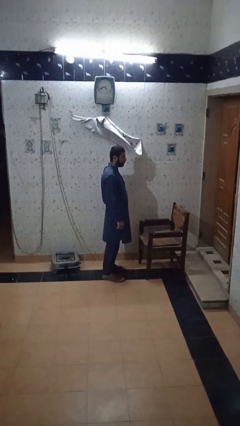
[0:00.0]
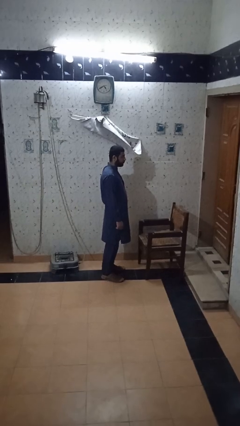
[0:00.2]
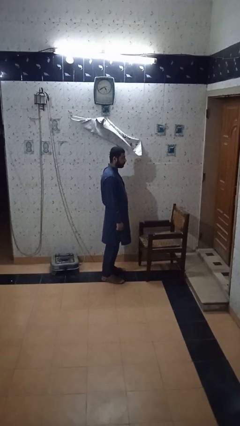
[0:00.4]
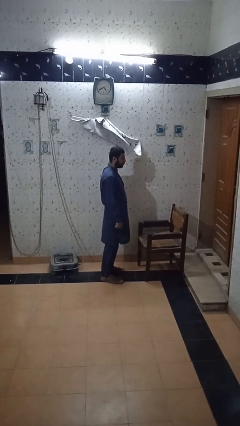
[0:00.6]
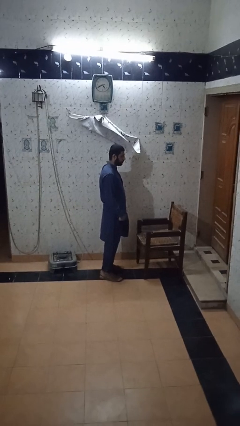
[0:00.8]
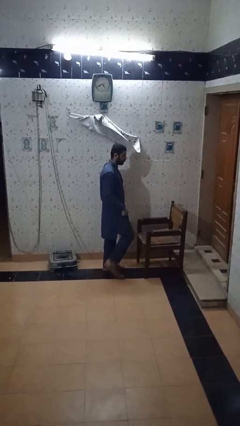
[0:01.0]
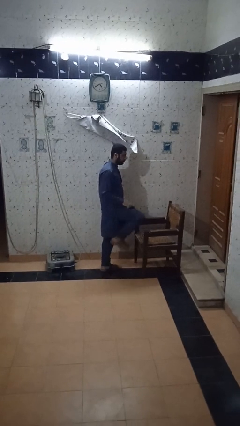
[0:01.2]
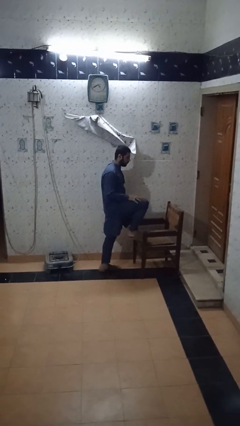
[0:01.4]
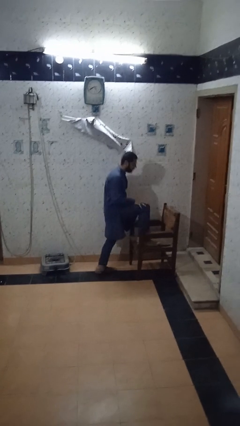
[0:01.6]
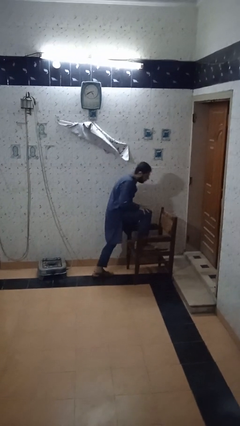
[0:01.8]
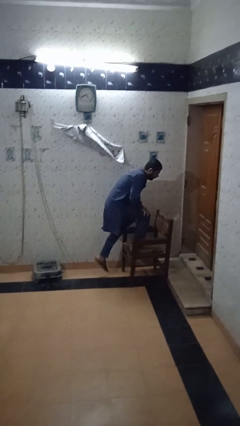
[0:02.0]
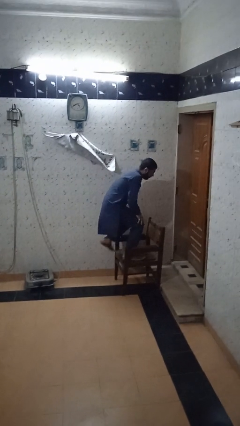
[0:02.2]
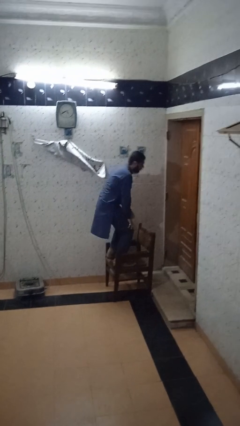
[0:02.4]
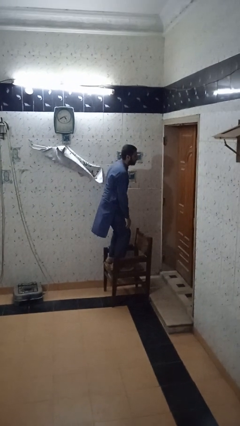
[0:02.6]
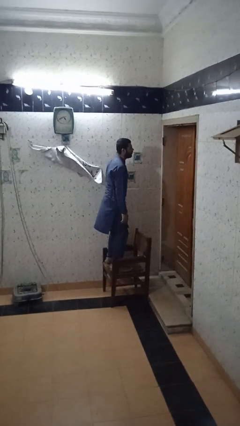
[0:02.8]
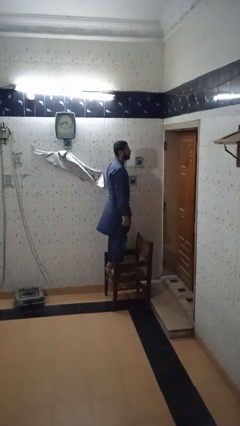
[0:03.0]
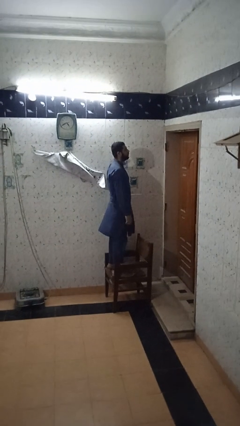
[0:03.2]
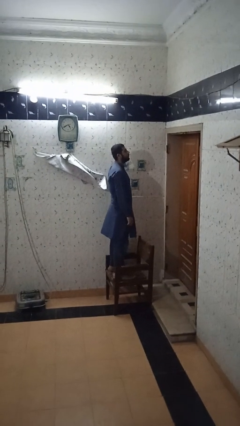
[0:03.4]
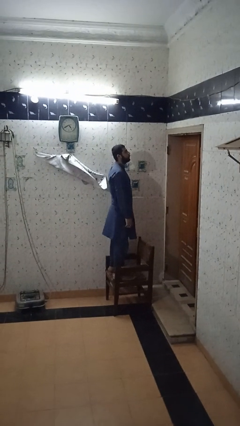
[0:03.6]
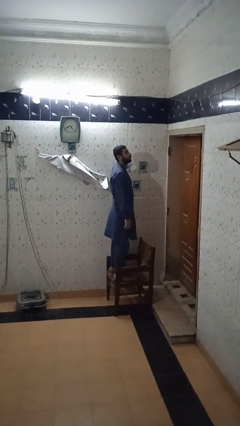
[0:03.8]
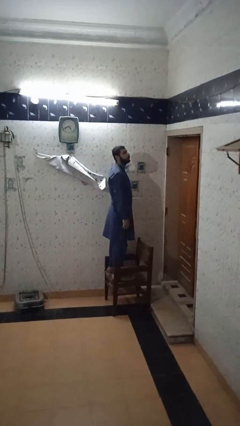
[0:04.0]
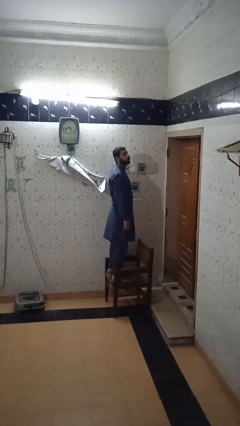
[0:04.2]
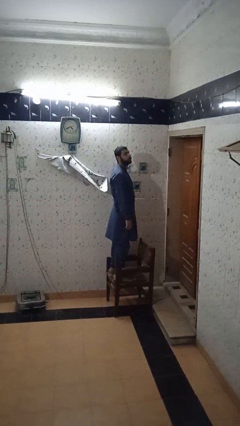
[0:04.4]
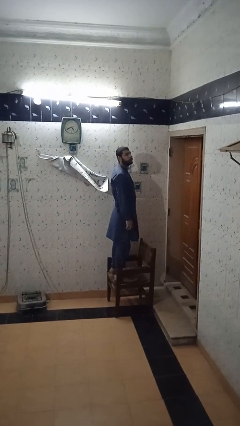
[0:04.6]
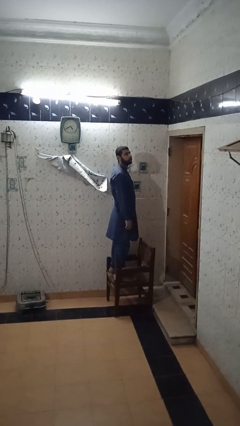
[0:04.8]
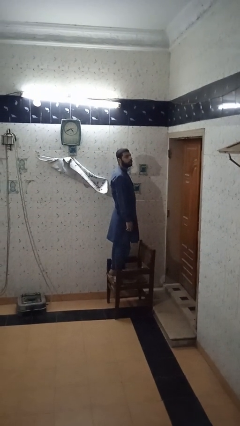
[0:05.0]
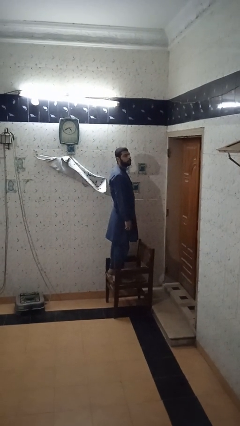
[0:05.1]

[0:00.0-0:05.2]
person climbs on chair

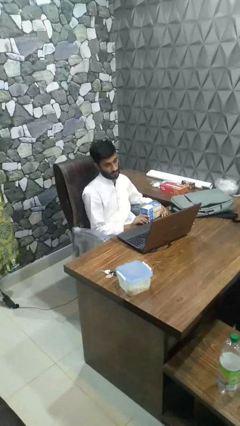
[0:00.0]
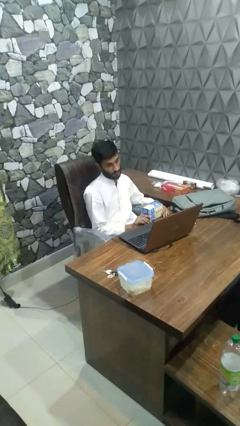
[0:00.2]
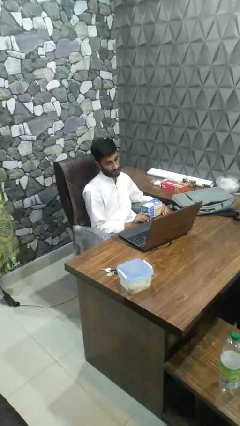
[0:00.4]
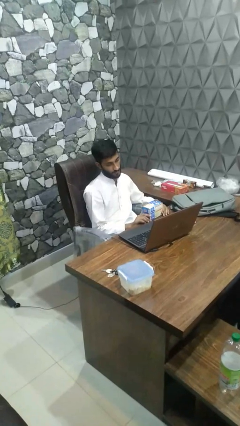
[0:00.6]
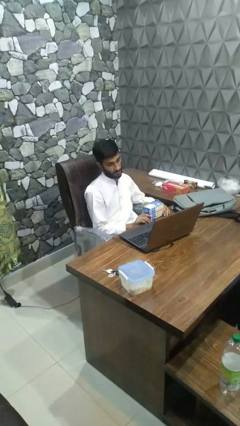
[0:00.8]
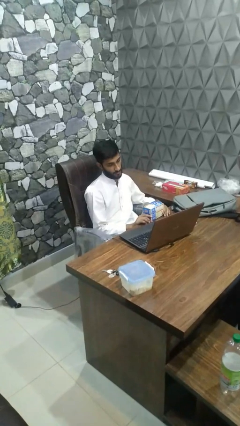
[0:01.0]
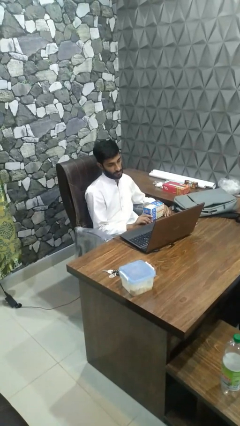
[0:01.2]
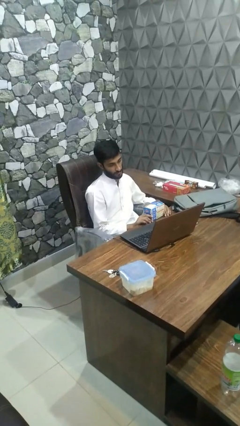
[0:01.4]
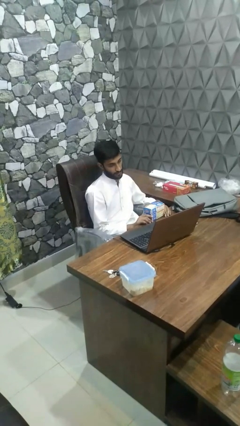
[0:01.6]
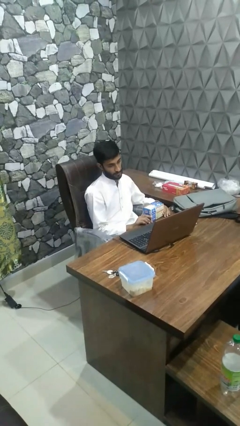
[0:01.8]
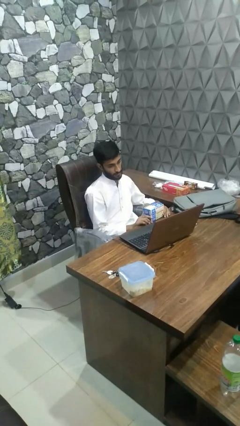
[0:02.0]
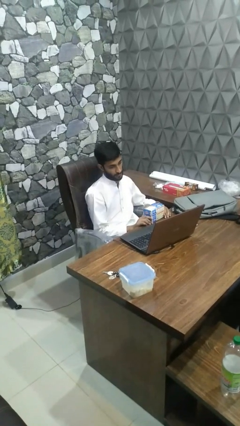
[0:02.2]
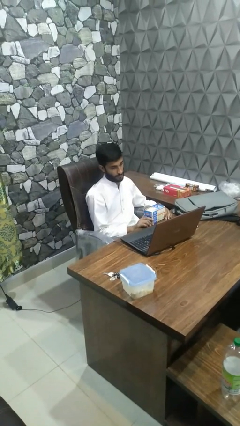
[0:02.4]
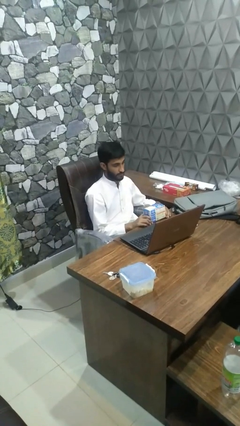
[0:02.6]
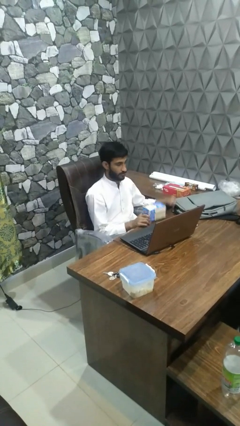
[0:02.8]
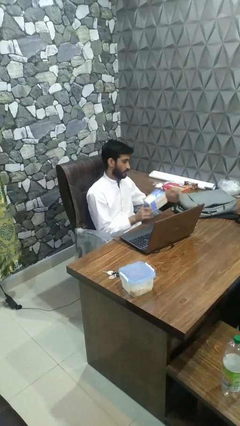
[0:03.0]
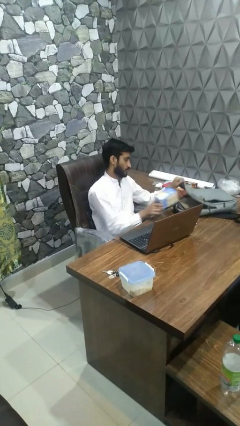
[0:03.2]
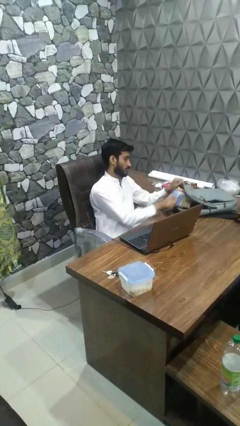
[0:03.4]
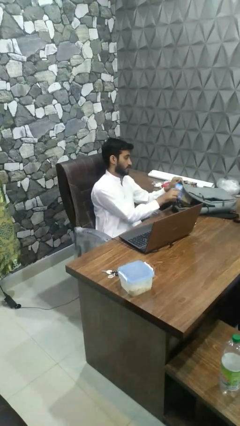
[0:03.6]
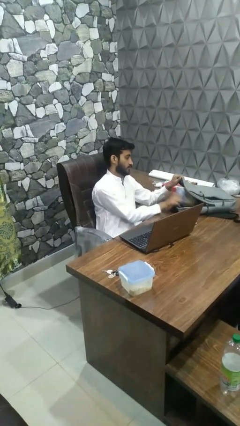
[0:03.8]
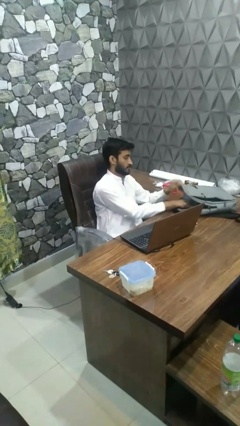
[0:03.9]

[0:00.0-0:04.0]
person puts object into bag

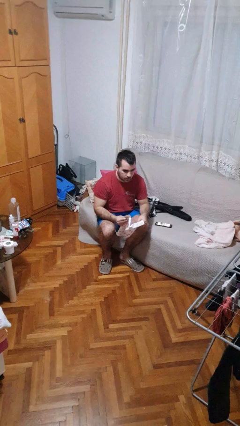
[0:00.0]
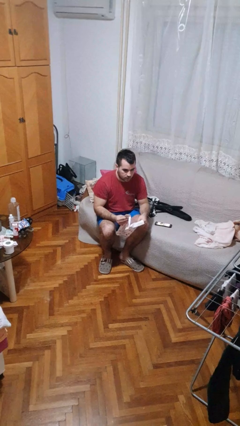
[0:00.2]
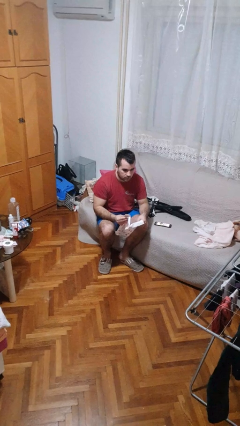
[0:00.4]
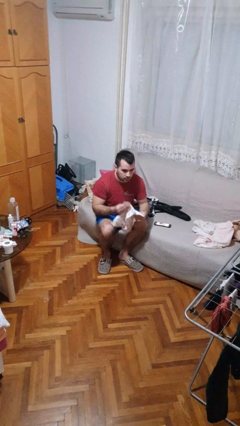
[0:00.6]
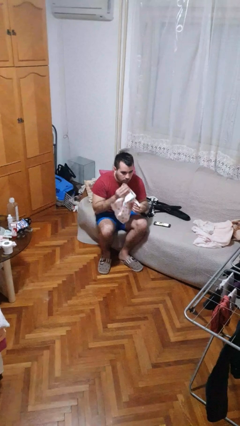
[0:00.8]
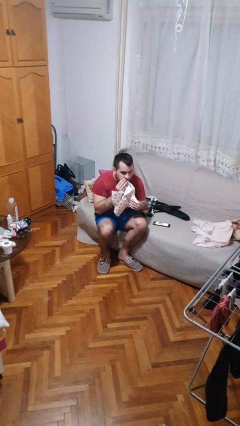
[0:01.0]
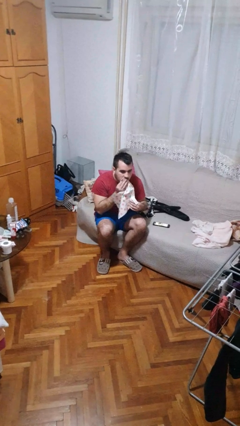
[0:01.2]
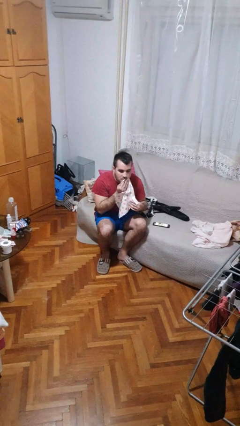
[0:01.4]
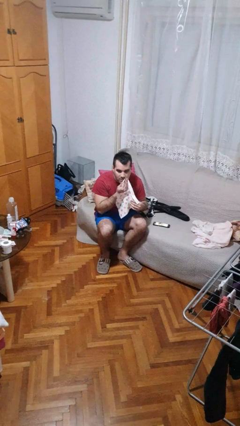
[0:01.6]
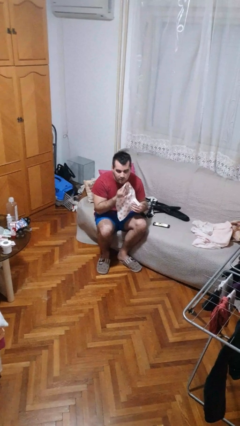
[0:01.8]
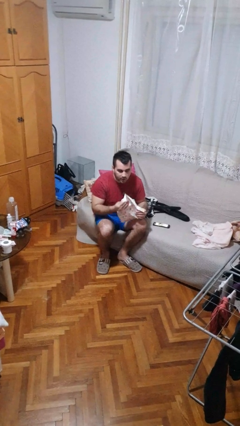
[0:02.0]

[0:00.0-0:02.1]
person wipes mouth with napkin

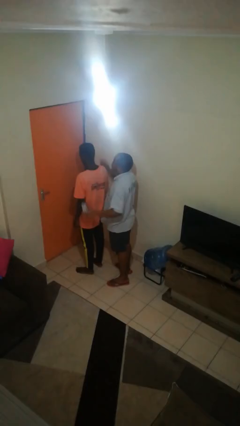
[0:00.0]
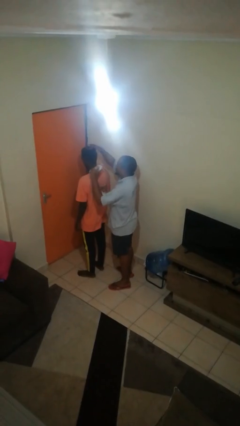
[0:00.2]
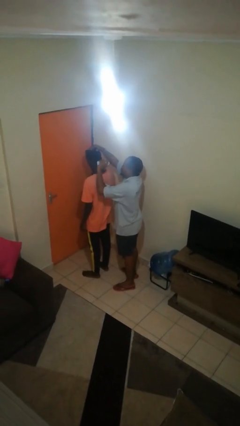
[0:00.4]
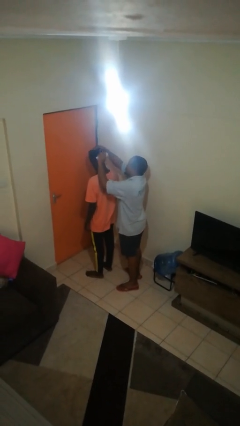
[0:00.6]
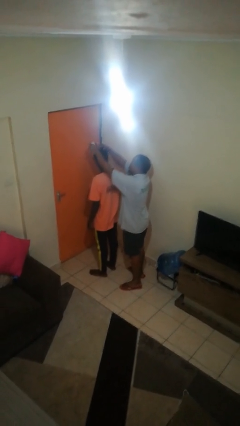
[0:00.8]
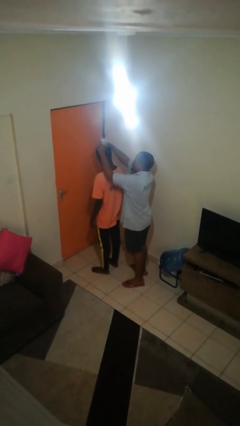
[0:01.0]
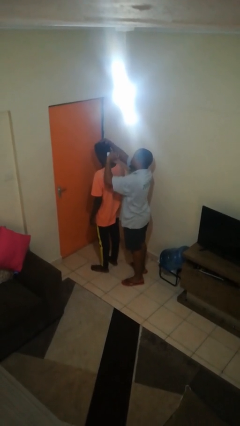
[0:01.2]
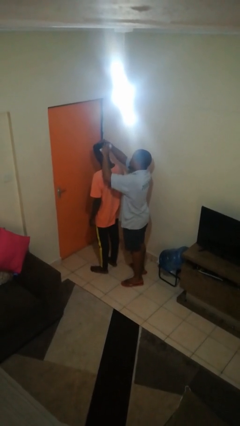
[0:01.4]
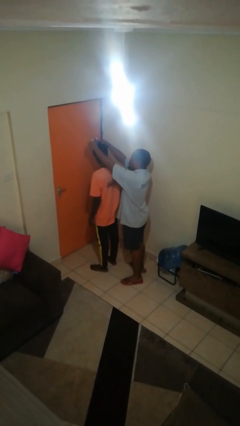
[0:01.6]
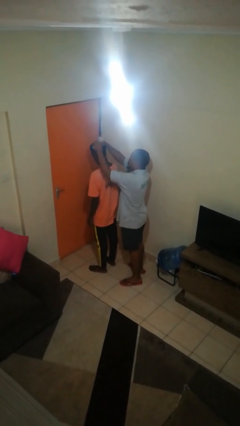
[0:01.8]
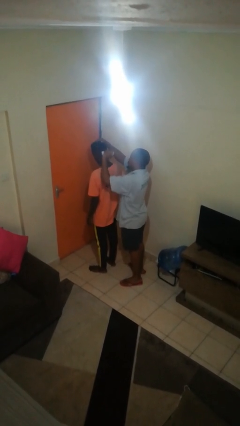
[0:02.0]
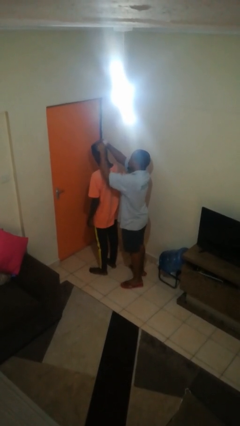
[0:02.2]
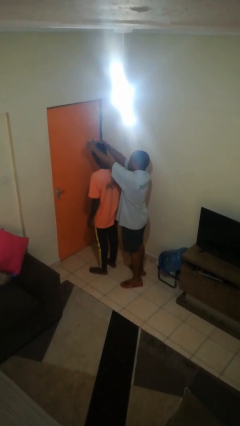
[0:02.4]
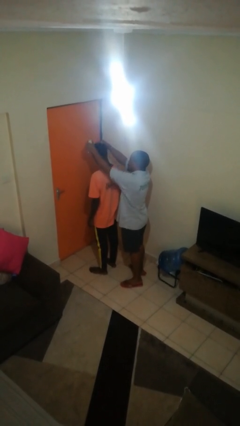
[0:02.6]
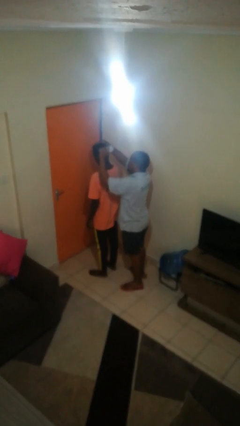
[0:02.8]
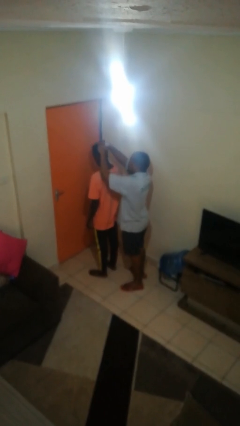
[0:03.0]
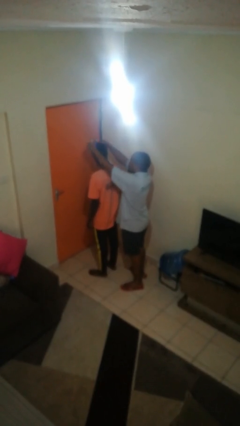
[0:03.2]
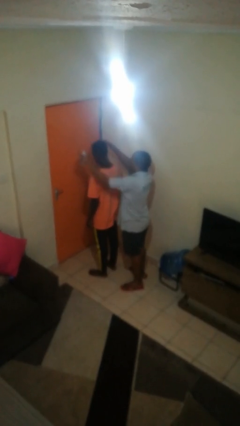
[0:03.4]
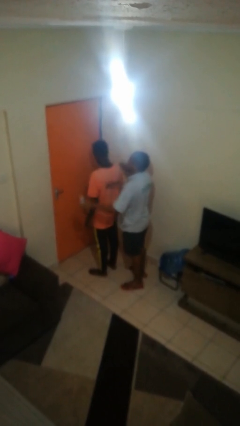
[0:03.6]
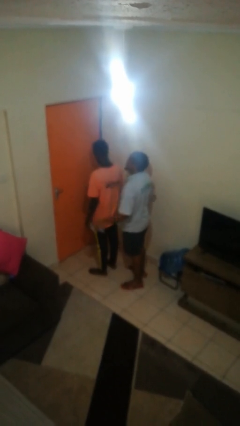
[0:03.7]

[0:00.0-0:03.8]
person brushes hair of person

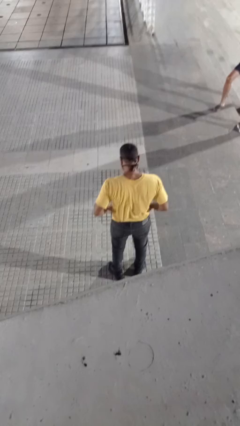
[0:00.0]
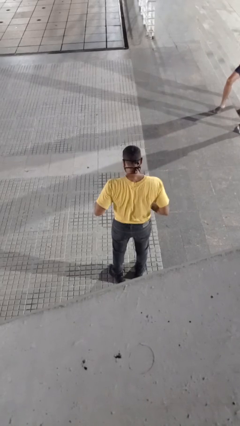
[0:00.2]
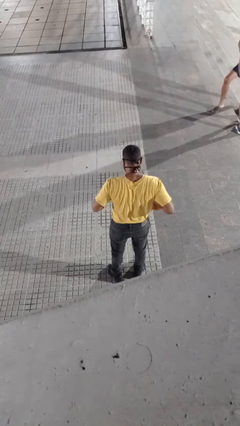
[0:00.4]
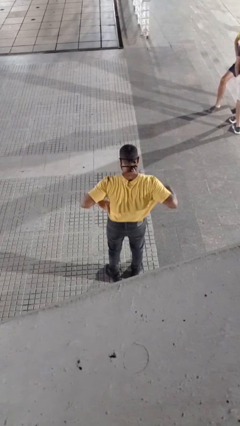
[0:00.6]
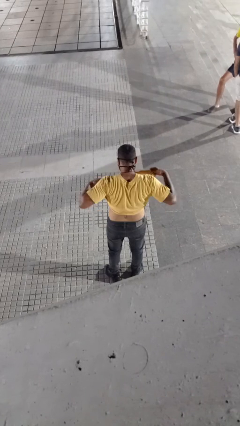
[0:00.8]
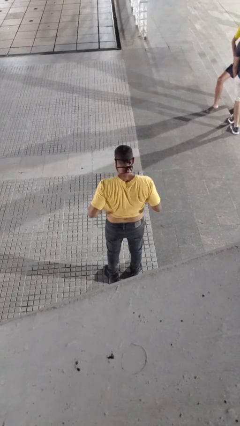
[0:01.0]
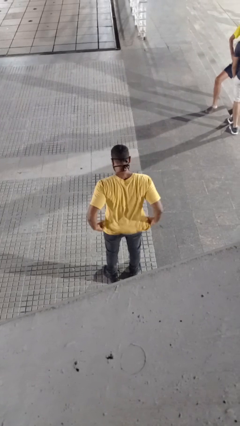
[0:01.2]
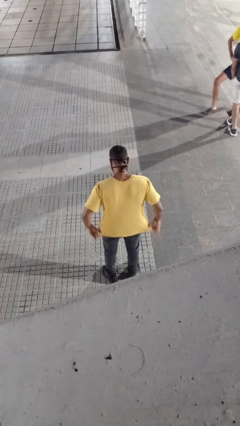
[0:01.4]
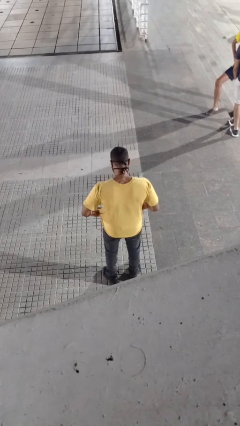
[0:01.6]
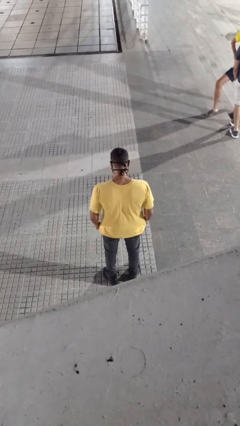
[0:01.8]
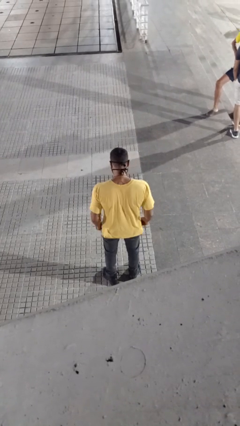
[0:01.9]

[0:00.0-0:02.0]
person untucks shirt

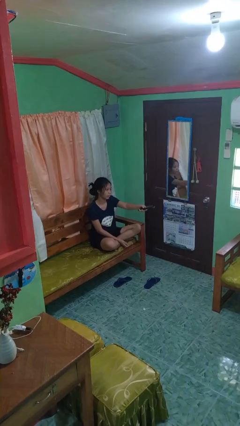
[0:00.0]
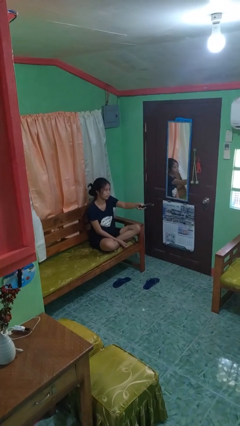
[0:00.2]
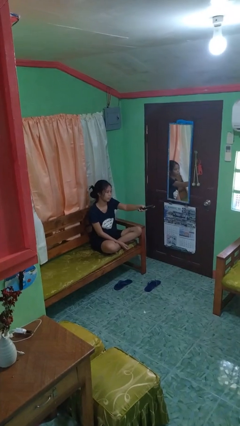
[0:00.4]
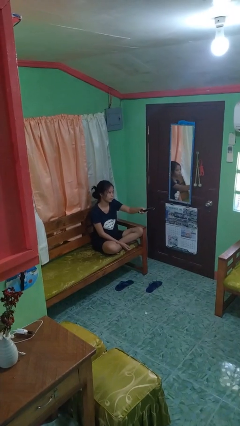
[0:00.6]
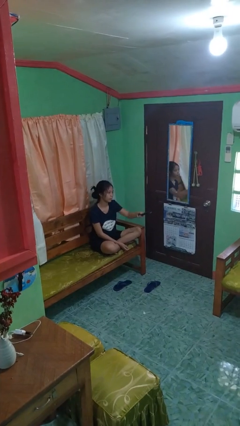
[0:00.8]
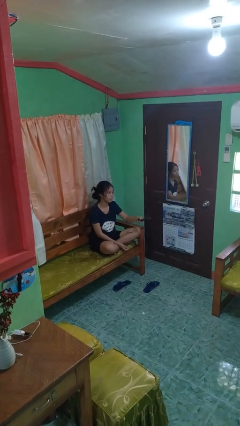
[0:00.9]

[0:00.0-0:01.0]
person uses television remote
